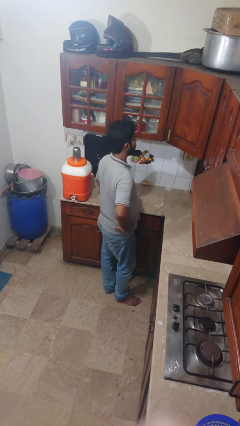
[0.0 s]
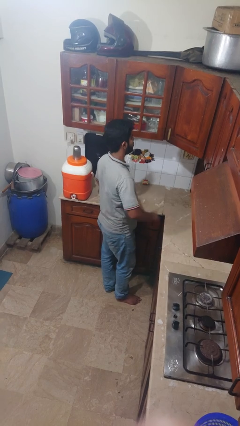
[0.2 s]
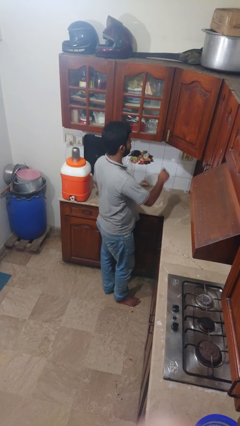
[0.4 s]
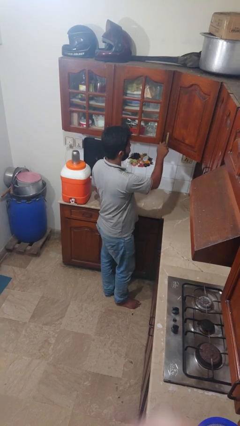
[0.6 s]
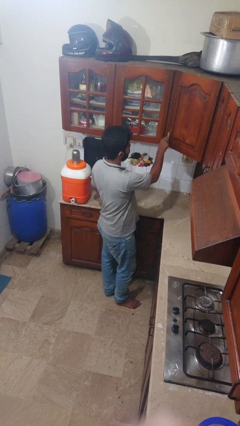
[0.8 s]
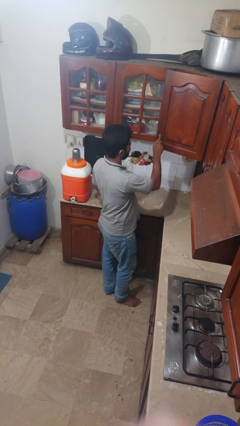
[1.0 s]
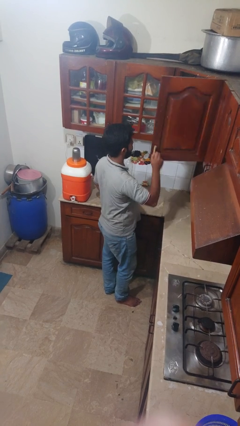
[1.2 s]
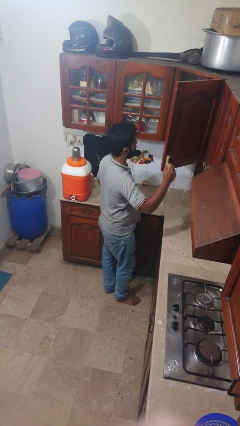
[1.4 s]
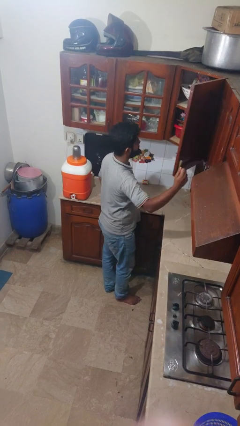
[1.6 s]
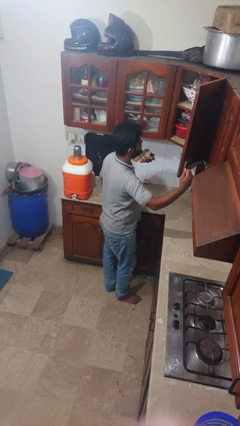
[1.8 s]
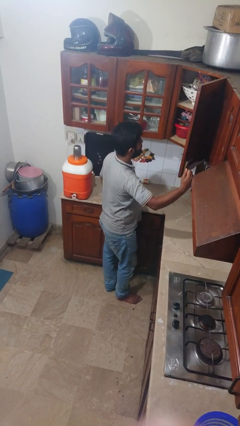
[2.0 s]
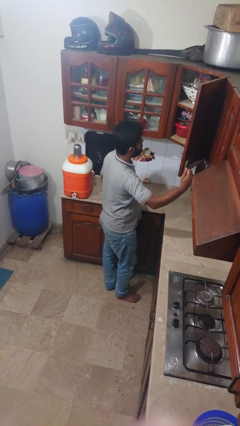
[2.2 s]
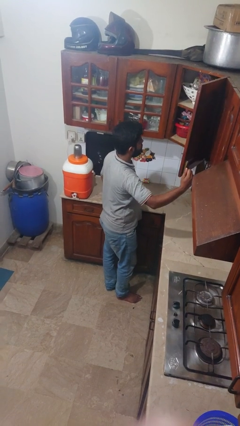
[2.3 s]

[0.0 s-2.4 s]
person closes cabinet

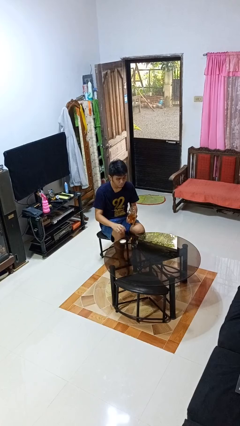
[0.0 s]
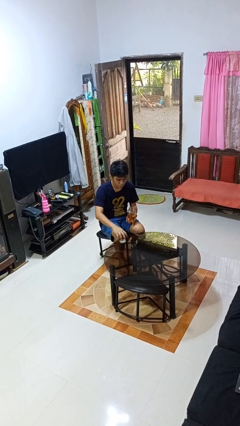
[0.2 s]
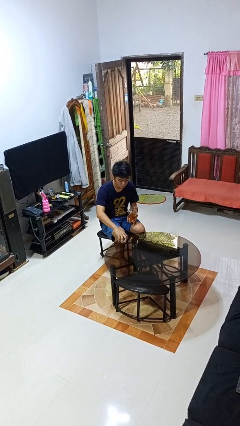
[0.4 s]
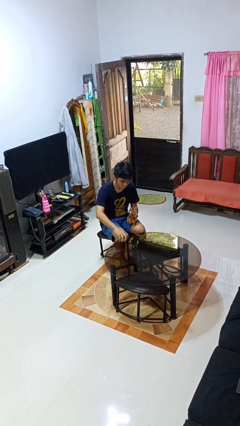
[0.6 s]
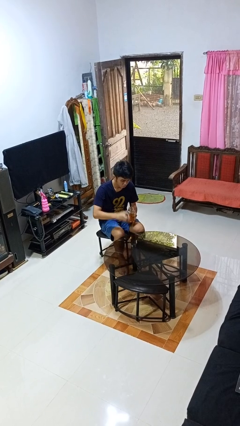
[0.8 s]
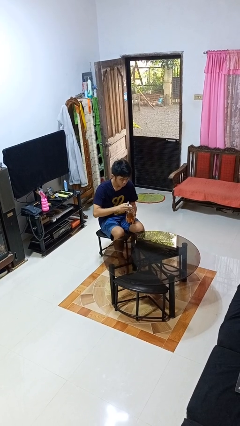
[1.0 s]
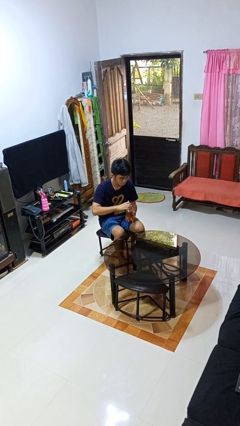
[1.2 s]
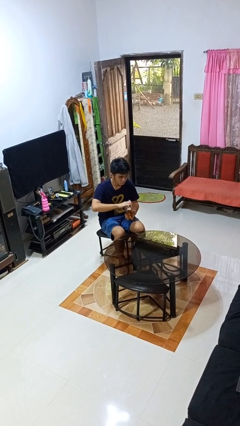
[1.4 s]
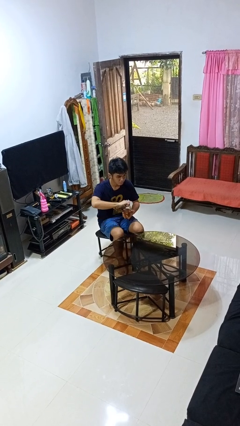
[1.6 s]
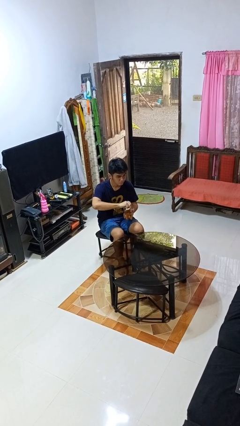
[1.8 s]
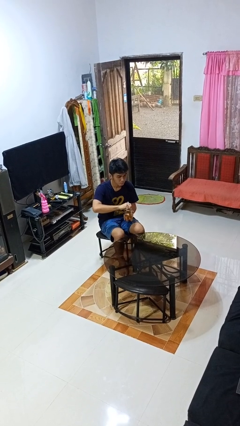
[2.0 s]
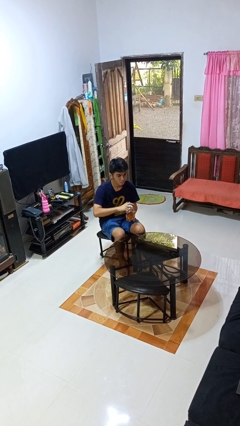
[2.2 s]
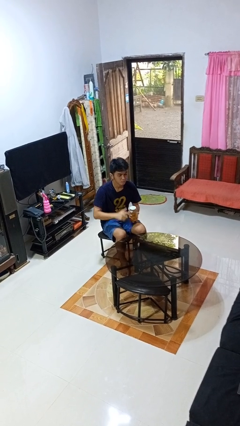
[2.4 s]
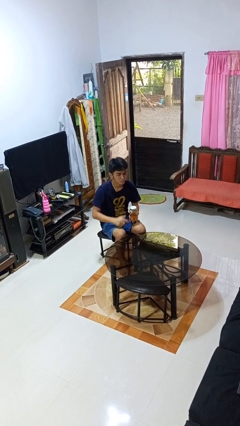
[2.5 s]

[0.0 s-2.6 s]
person closes jar

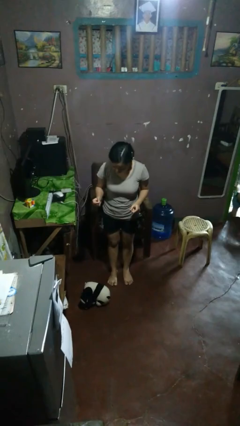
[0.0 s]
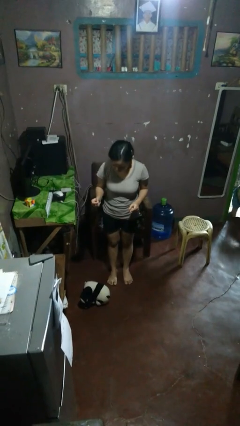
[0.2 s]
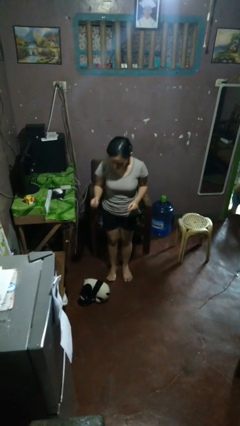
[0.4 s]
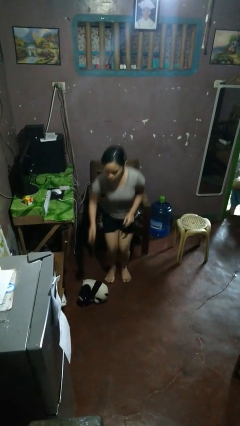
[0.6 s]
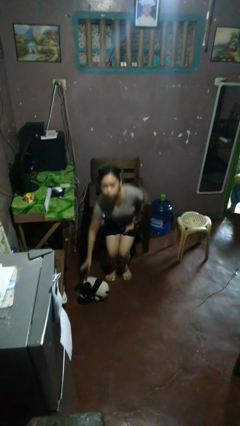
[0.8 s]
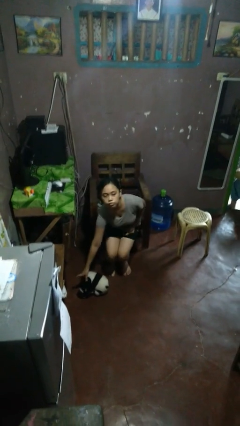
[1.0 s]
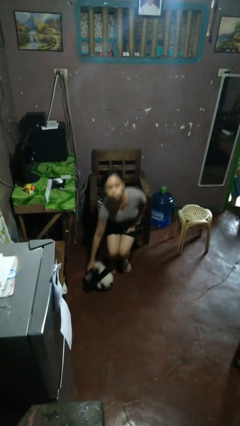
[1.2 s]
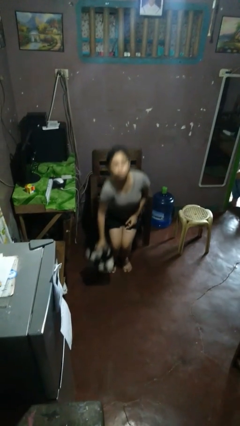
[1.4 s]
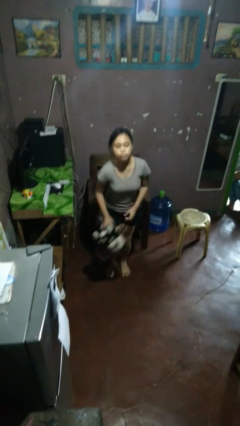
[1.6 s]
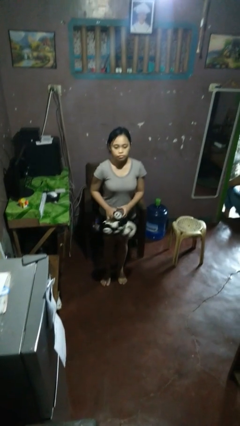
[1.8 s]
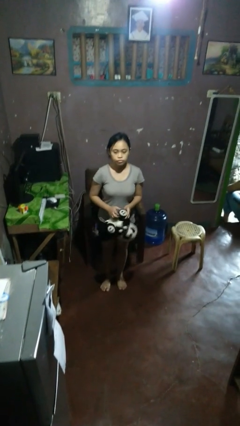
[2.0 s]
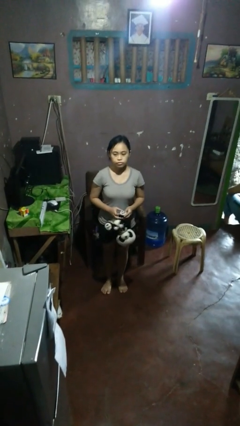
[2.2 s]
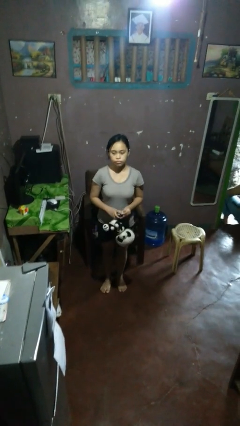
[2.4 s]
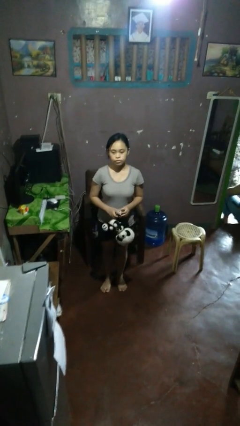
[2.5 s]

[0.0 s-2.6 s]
person picks up object from floor

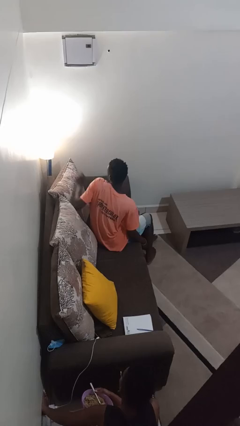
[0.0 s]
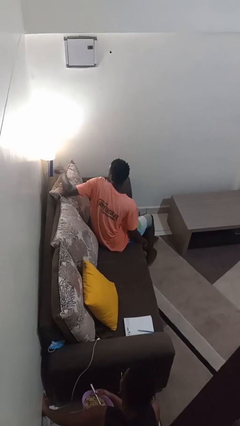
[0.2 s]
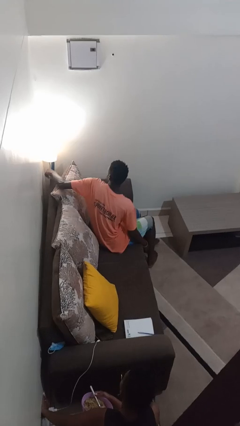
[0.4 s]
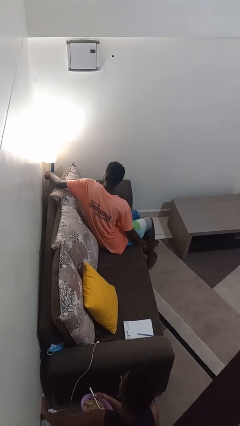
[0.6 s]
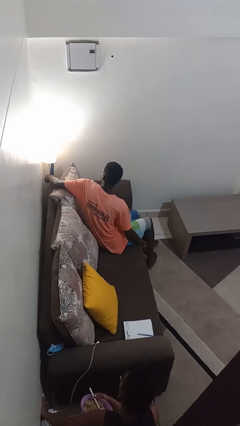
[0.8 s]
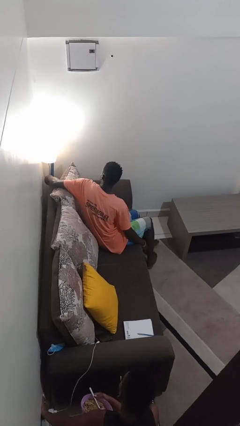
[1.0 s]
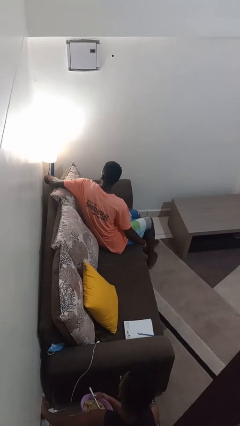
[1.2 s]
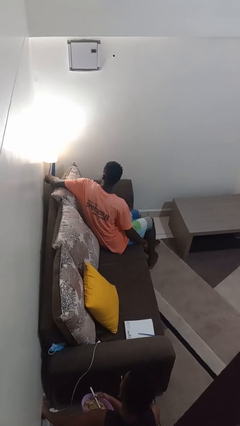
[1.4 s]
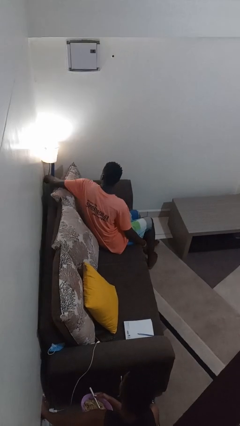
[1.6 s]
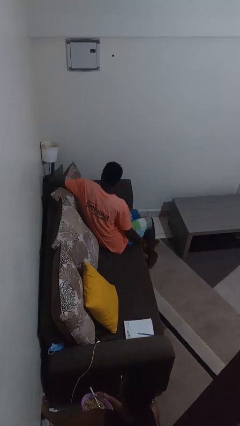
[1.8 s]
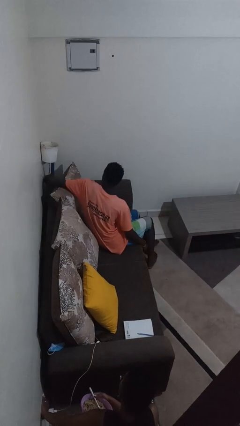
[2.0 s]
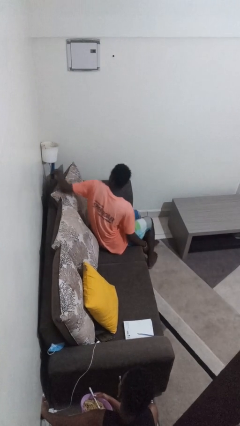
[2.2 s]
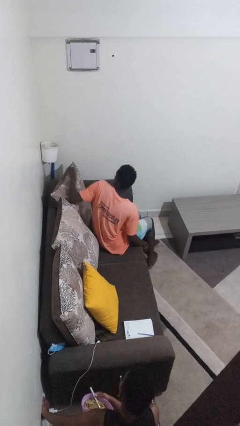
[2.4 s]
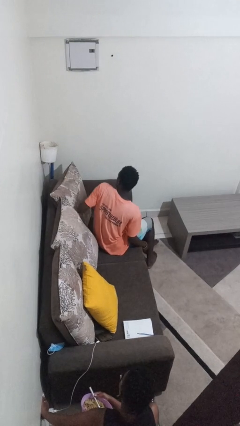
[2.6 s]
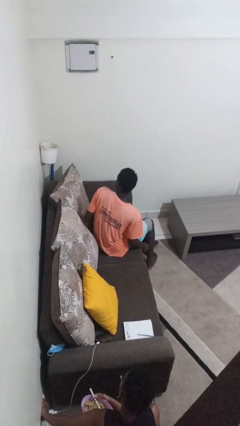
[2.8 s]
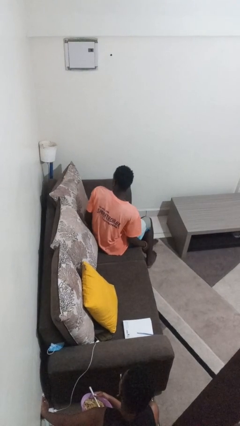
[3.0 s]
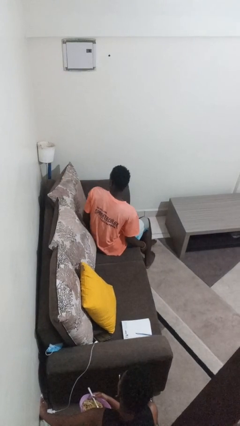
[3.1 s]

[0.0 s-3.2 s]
person turns off lamp

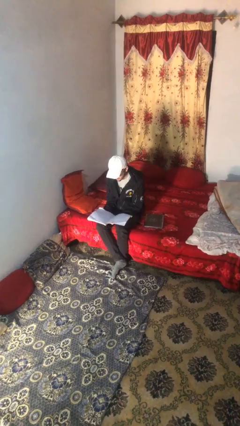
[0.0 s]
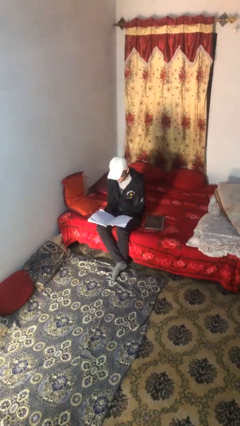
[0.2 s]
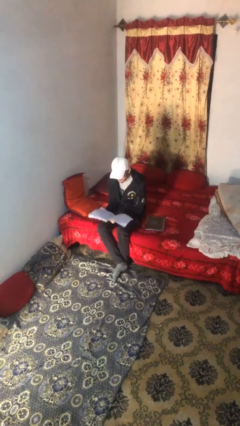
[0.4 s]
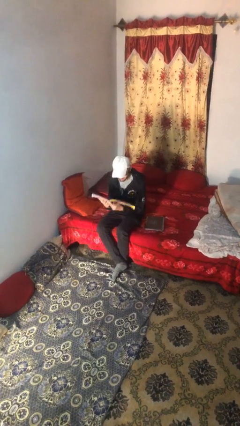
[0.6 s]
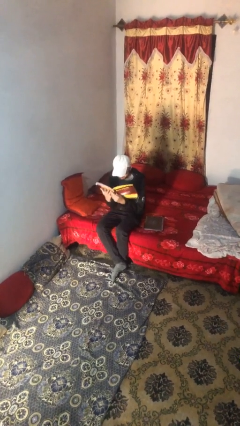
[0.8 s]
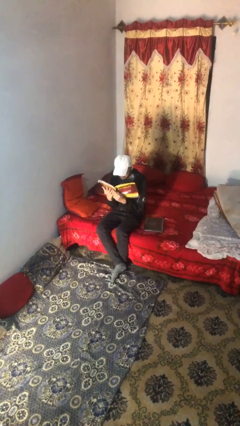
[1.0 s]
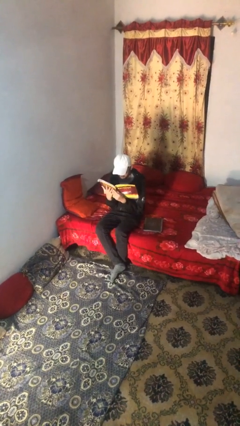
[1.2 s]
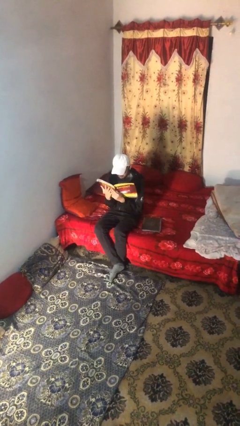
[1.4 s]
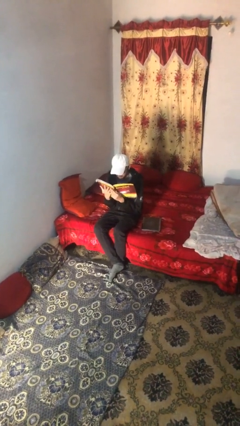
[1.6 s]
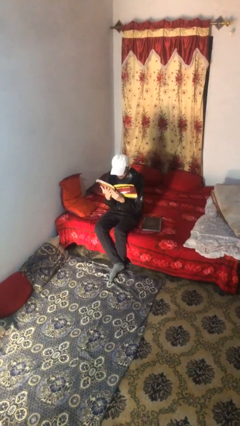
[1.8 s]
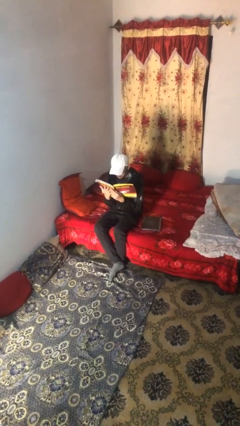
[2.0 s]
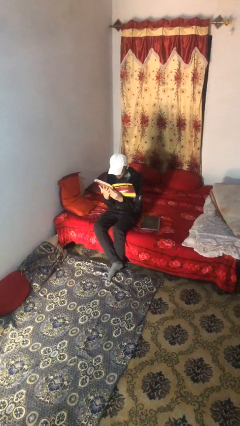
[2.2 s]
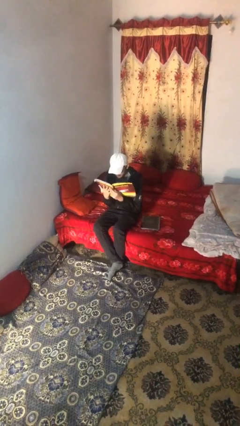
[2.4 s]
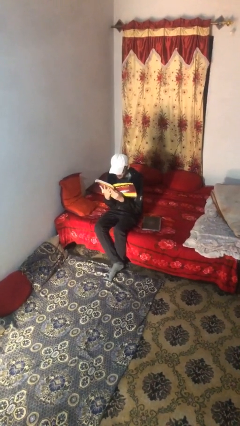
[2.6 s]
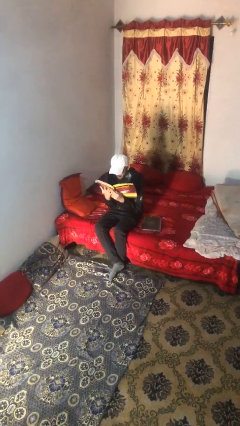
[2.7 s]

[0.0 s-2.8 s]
person reads document

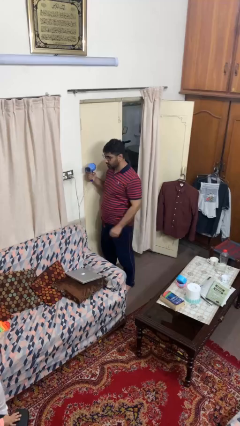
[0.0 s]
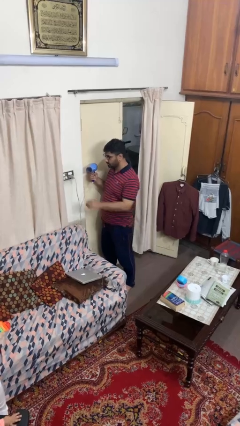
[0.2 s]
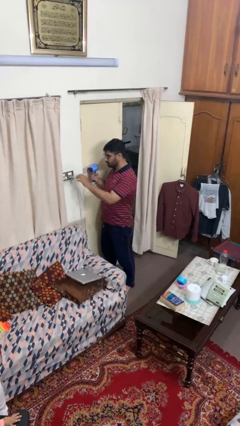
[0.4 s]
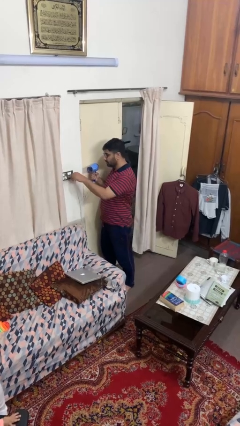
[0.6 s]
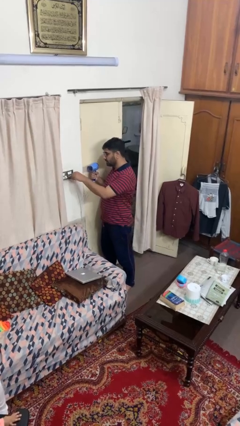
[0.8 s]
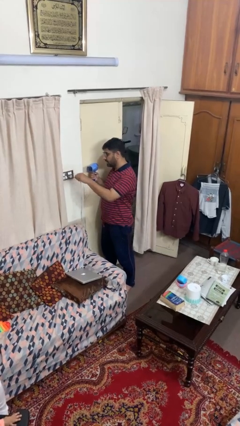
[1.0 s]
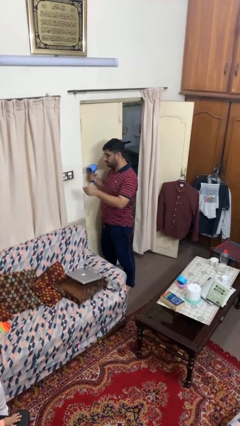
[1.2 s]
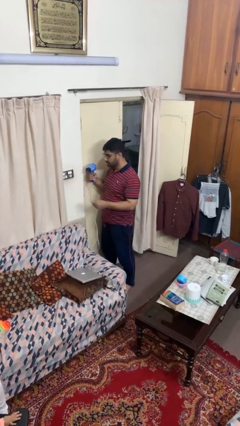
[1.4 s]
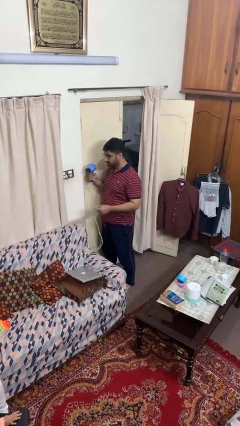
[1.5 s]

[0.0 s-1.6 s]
person unplugs from electrical socket

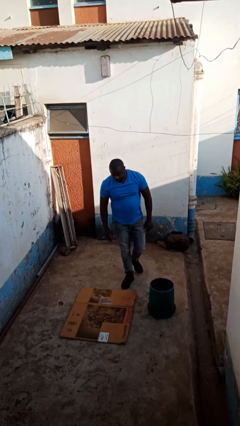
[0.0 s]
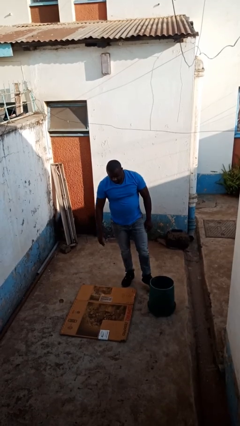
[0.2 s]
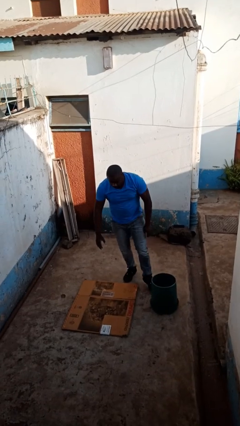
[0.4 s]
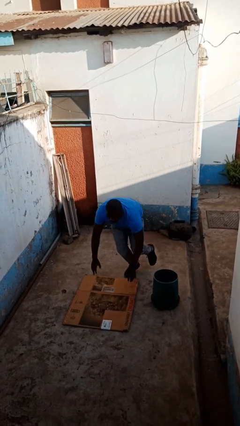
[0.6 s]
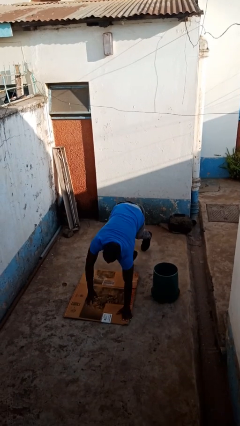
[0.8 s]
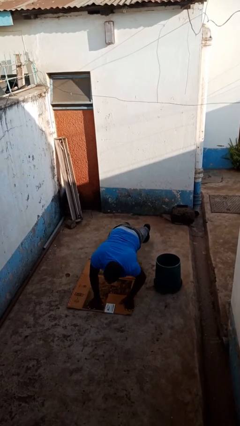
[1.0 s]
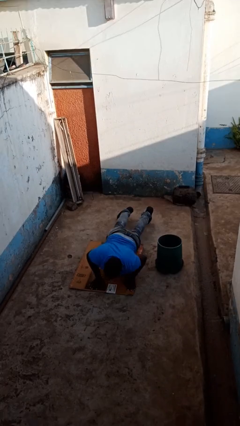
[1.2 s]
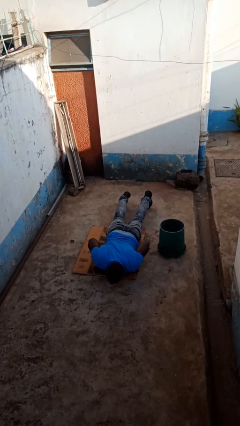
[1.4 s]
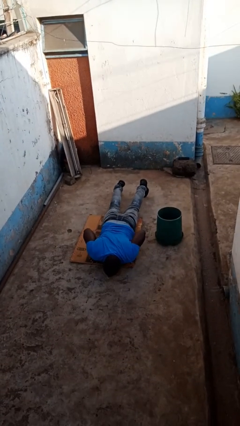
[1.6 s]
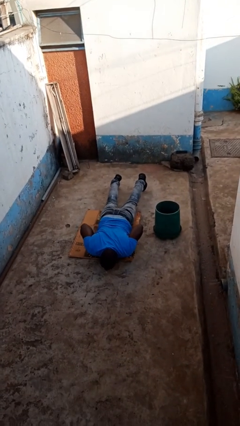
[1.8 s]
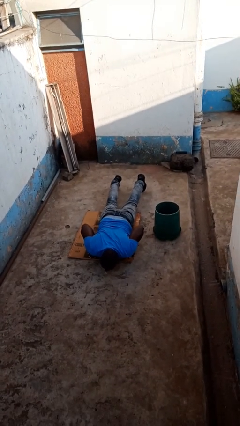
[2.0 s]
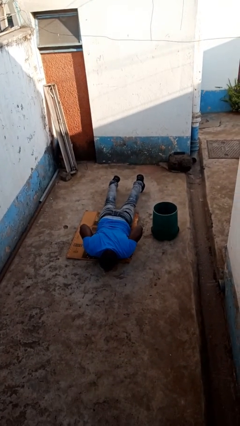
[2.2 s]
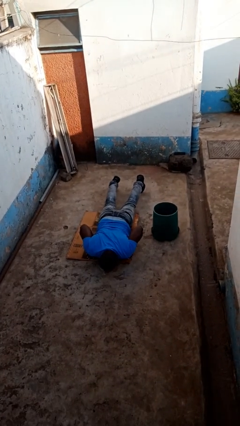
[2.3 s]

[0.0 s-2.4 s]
person trips on object on floor
